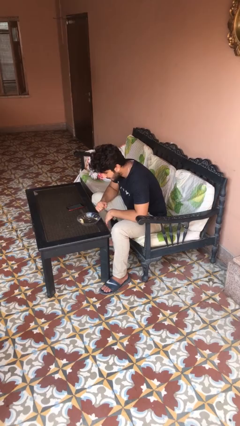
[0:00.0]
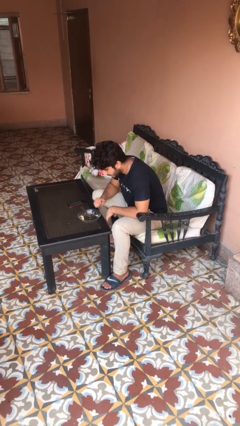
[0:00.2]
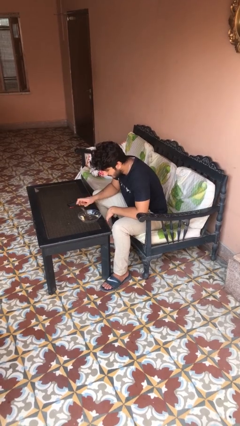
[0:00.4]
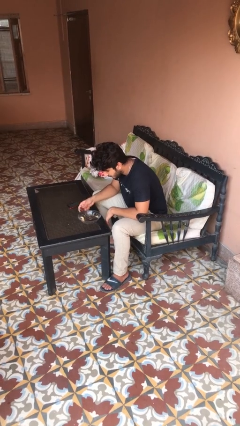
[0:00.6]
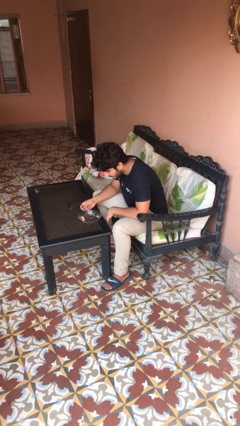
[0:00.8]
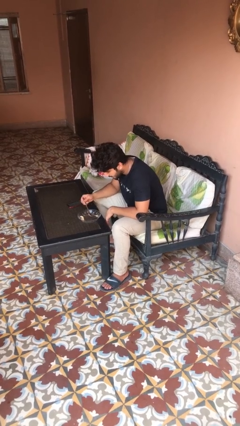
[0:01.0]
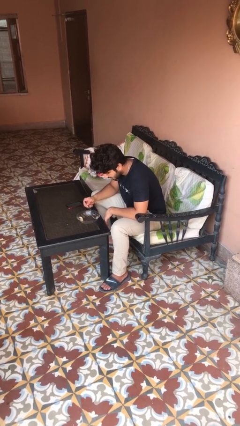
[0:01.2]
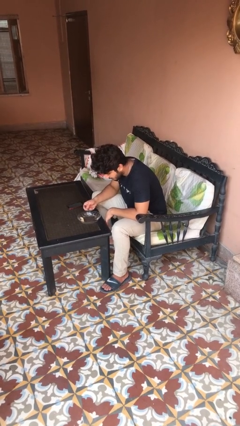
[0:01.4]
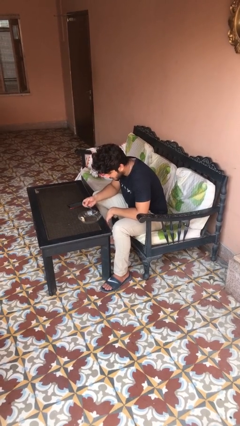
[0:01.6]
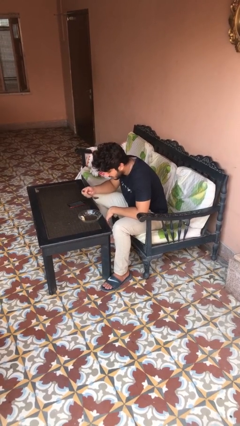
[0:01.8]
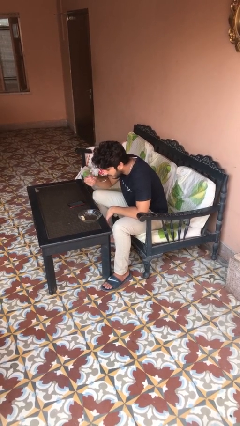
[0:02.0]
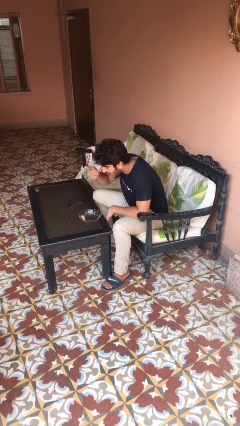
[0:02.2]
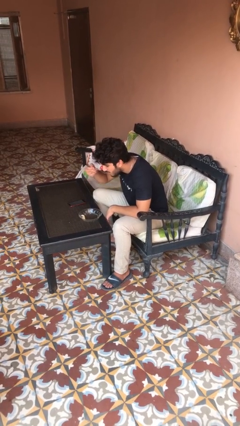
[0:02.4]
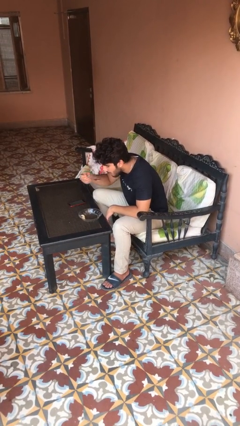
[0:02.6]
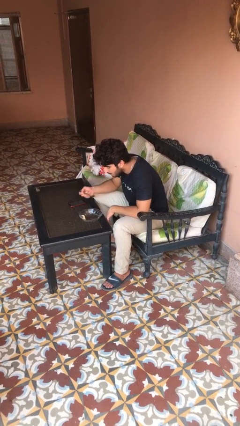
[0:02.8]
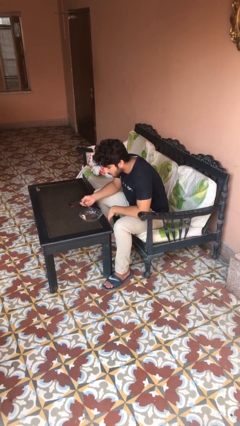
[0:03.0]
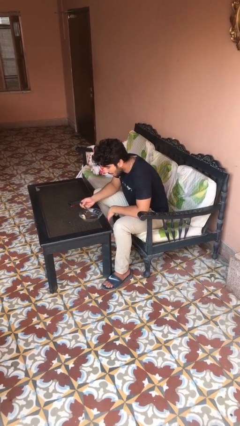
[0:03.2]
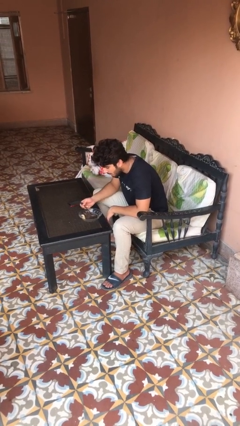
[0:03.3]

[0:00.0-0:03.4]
person eats with utensil

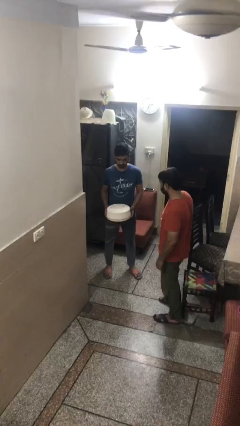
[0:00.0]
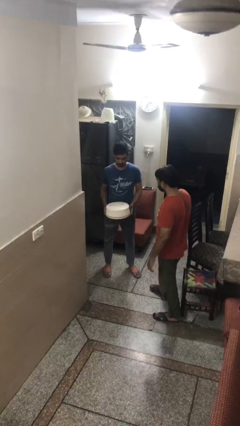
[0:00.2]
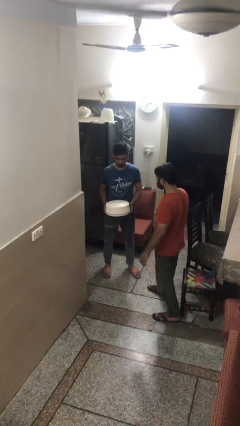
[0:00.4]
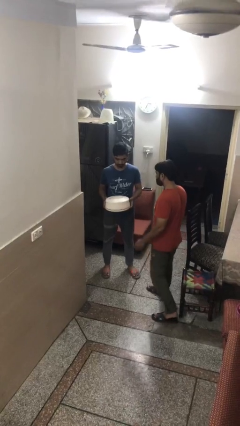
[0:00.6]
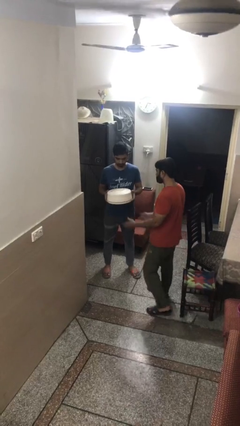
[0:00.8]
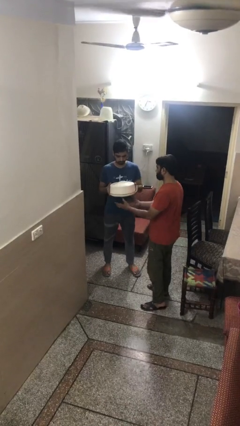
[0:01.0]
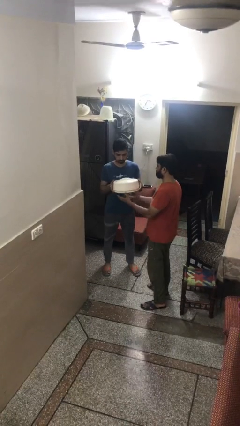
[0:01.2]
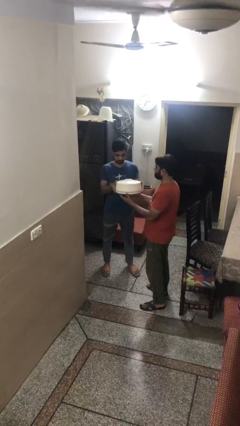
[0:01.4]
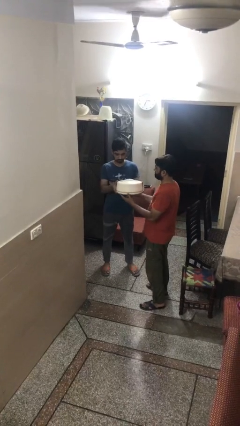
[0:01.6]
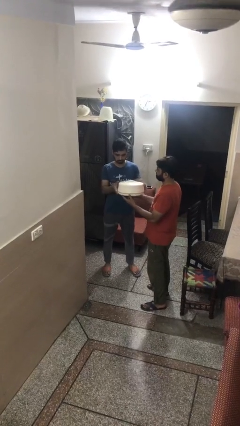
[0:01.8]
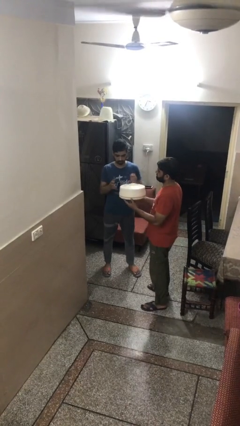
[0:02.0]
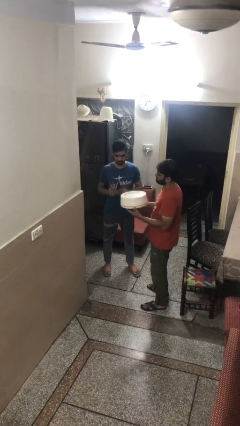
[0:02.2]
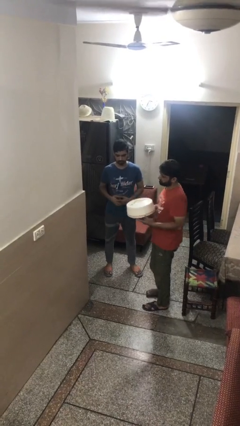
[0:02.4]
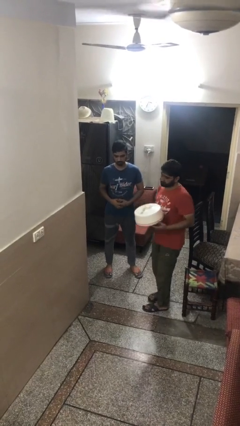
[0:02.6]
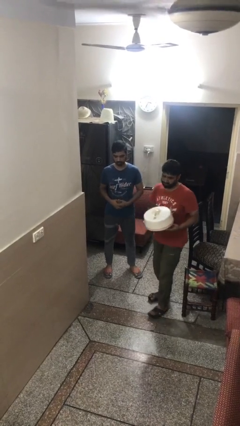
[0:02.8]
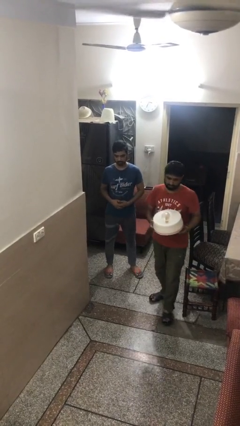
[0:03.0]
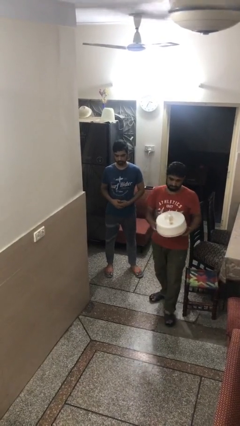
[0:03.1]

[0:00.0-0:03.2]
person transfers object to person

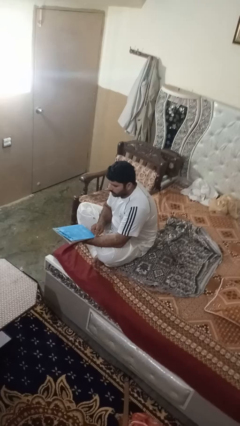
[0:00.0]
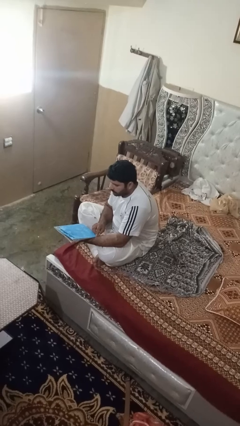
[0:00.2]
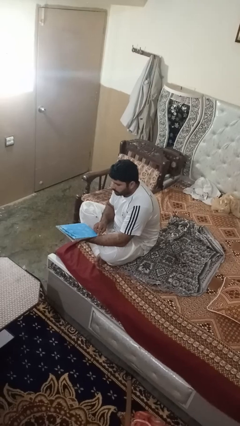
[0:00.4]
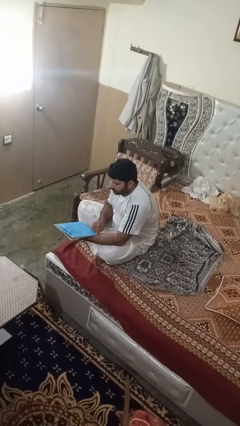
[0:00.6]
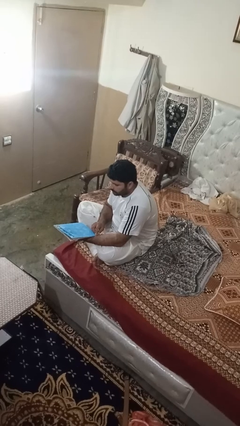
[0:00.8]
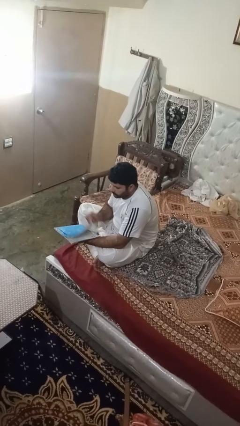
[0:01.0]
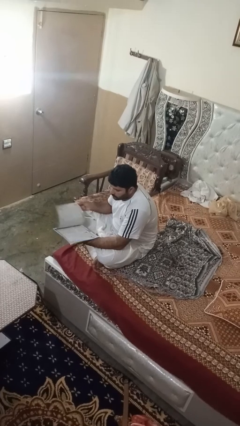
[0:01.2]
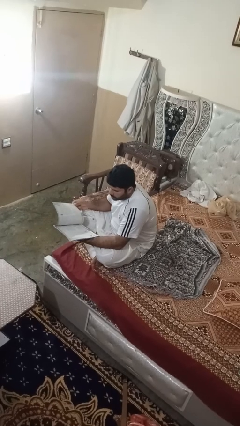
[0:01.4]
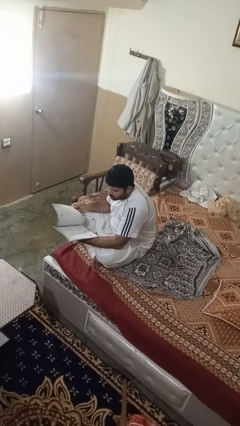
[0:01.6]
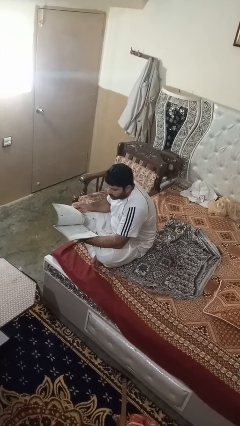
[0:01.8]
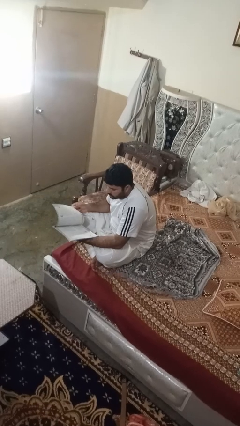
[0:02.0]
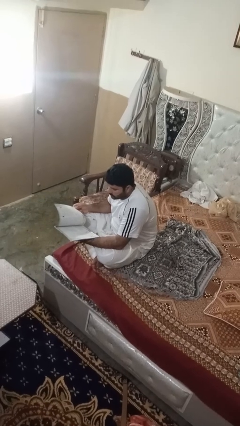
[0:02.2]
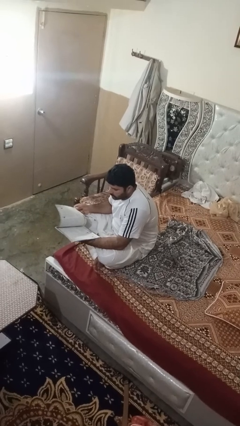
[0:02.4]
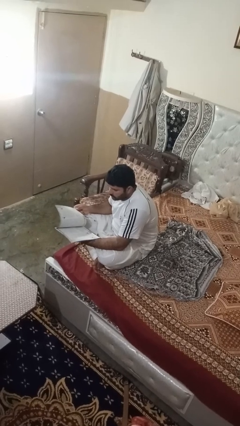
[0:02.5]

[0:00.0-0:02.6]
person reads magazine

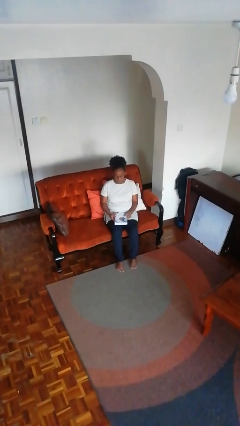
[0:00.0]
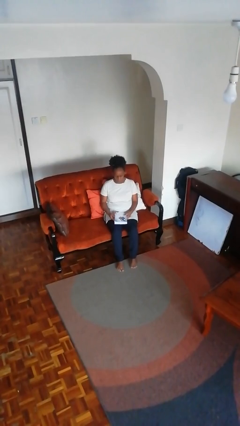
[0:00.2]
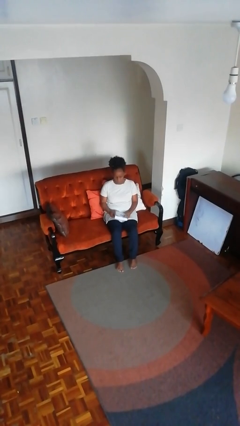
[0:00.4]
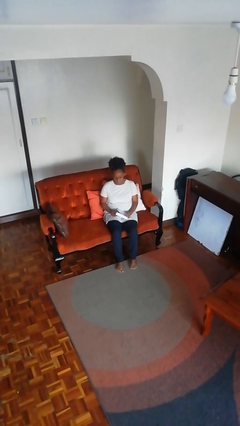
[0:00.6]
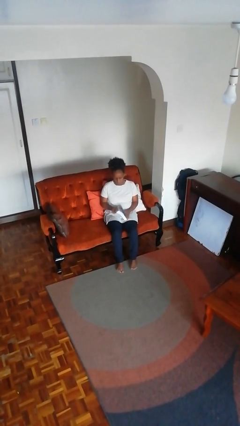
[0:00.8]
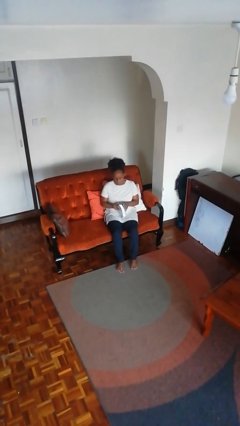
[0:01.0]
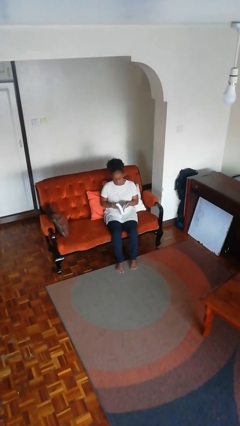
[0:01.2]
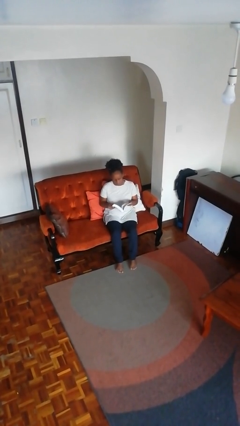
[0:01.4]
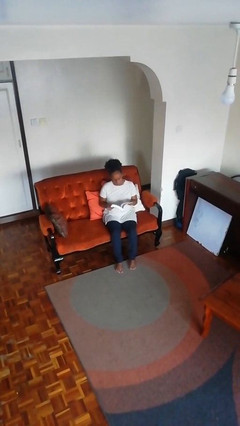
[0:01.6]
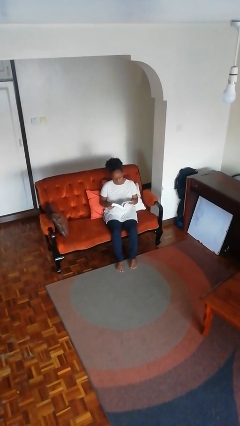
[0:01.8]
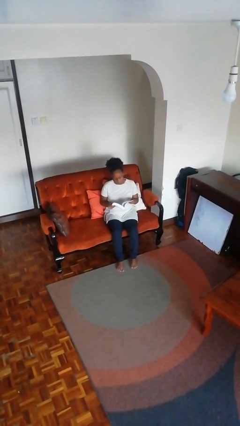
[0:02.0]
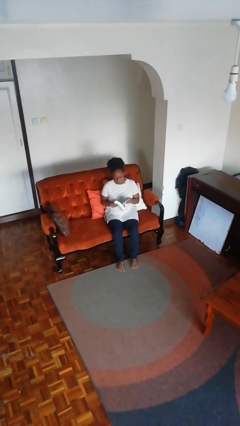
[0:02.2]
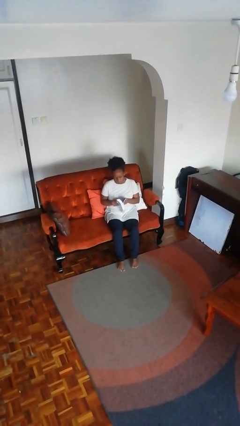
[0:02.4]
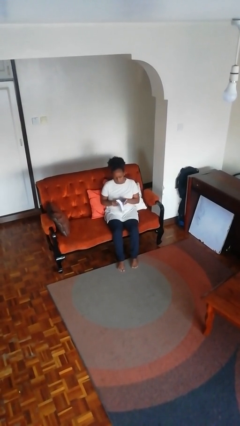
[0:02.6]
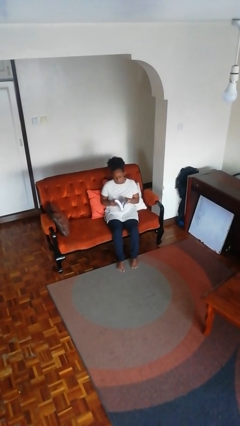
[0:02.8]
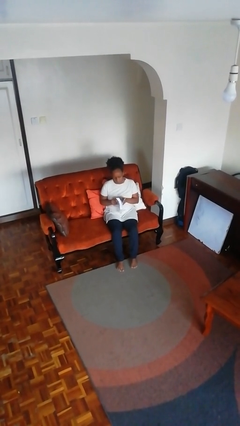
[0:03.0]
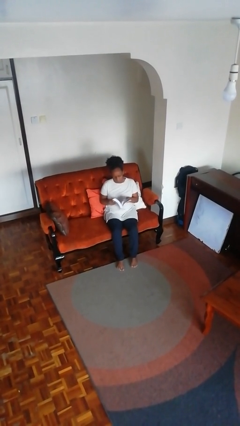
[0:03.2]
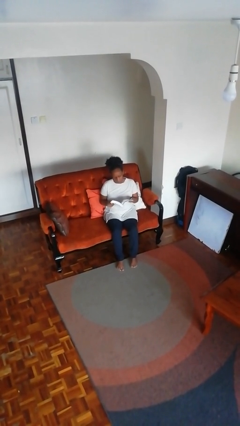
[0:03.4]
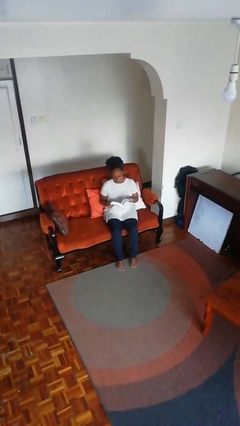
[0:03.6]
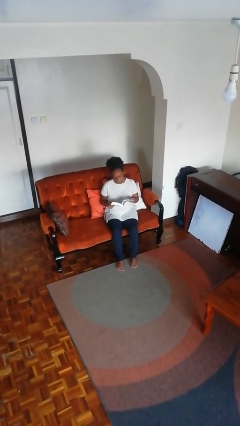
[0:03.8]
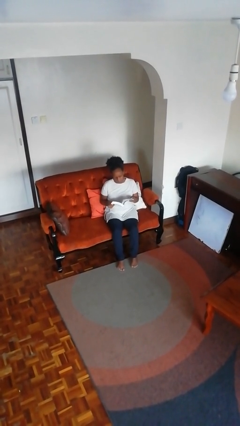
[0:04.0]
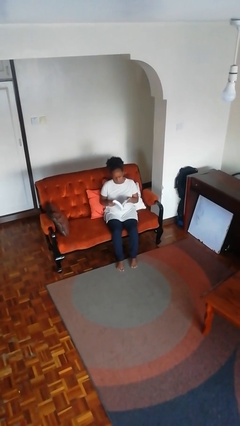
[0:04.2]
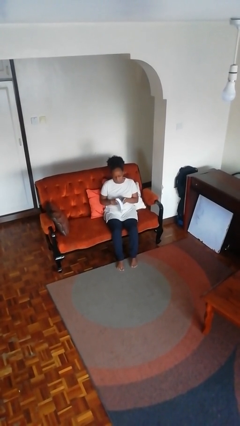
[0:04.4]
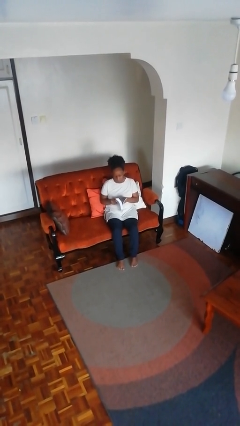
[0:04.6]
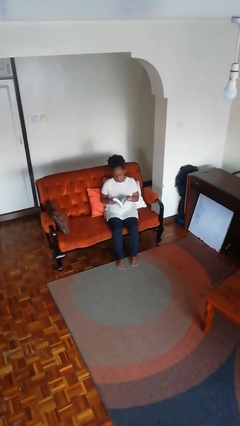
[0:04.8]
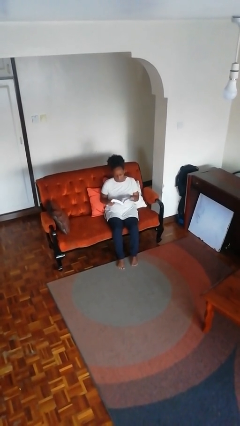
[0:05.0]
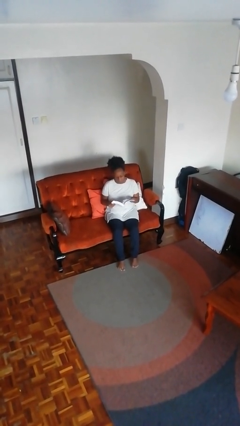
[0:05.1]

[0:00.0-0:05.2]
person reads book

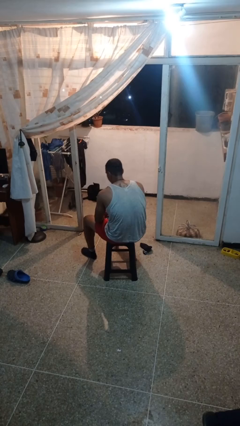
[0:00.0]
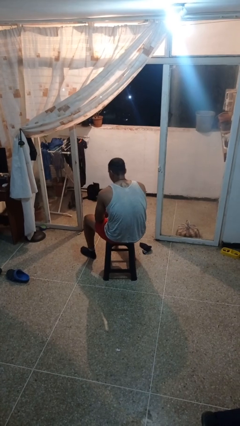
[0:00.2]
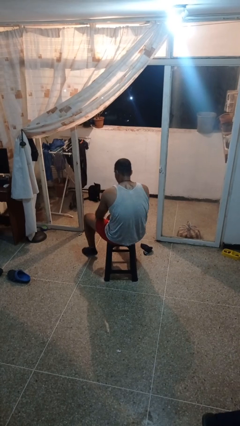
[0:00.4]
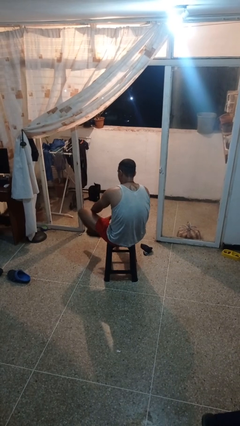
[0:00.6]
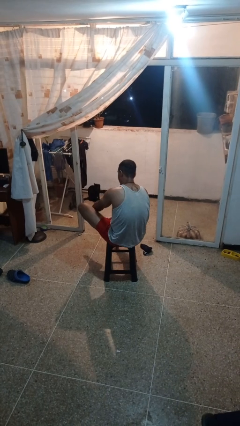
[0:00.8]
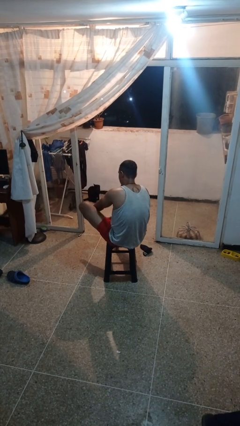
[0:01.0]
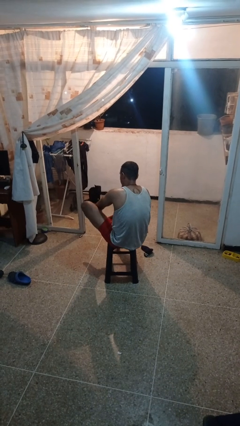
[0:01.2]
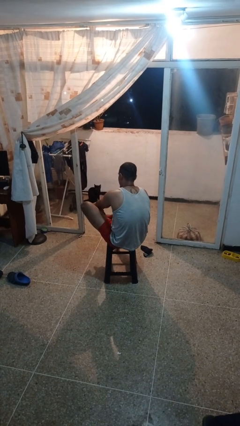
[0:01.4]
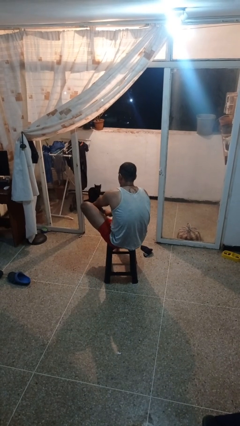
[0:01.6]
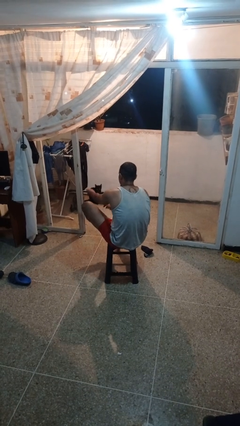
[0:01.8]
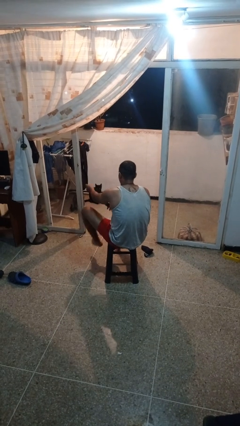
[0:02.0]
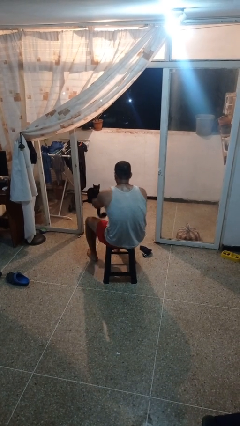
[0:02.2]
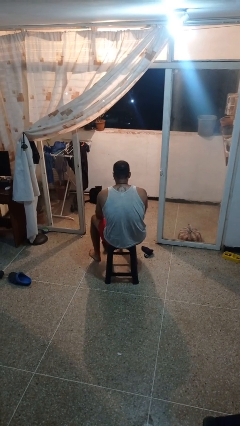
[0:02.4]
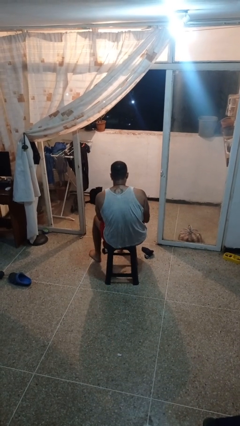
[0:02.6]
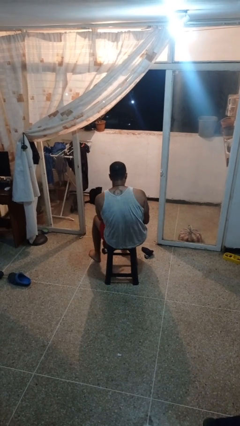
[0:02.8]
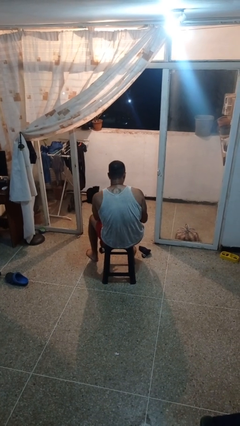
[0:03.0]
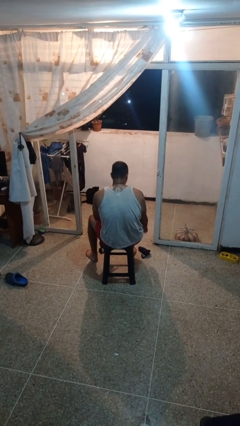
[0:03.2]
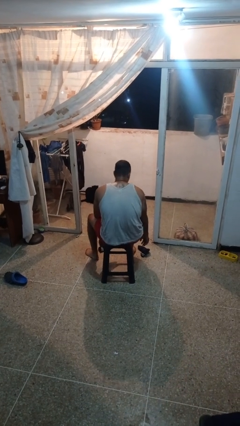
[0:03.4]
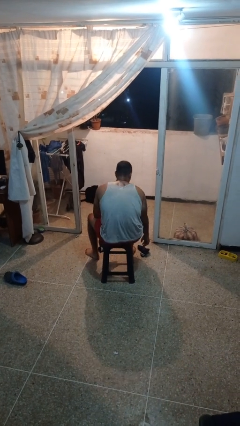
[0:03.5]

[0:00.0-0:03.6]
person takes off socks
